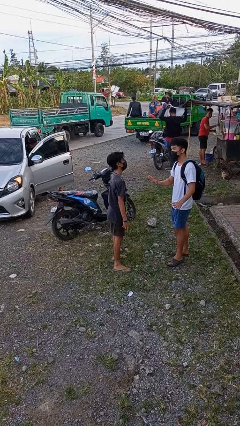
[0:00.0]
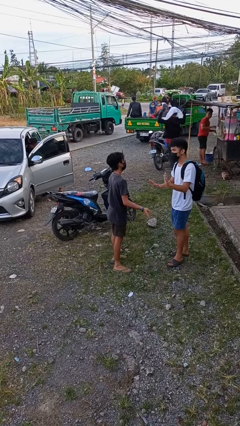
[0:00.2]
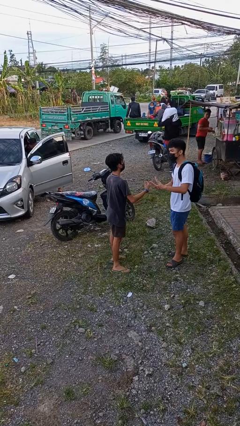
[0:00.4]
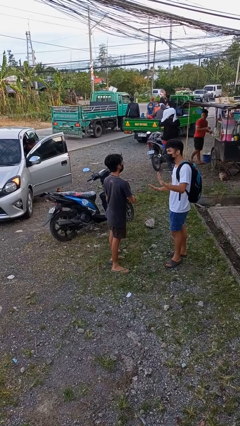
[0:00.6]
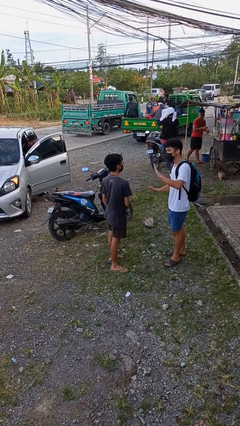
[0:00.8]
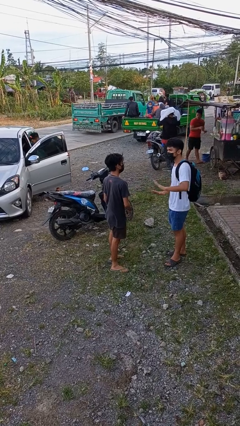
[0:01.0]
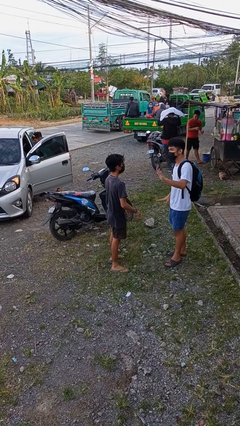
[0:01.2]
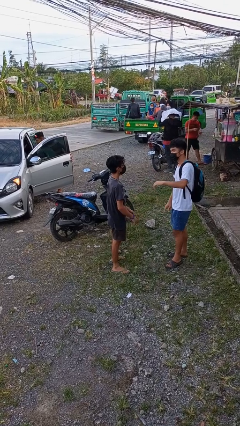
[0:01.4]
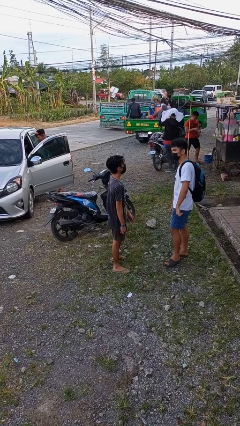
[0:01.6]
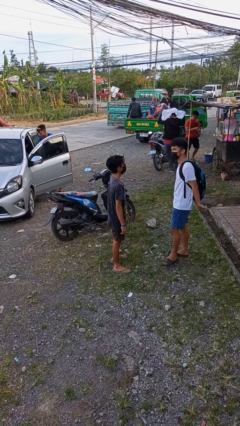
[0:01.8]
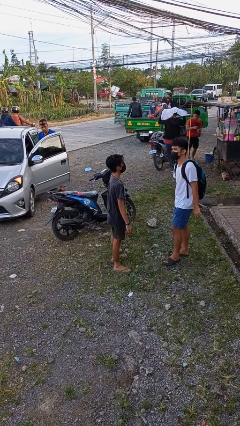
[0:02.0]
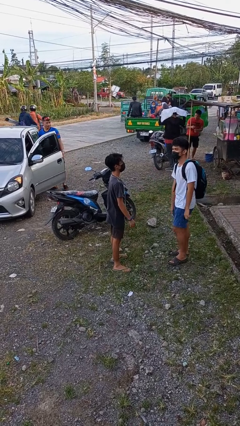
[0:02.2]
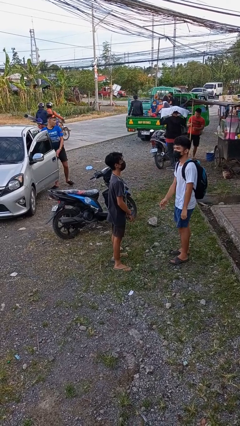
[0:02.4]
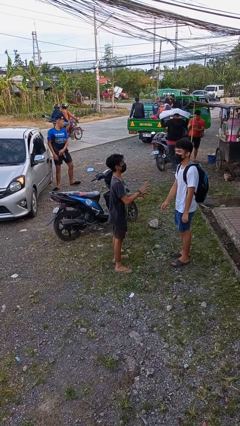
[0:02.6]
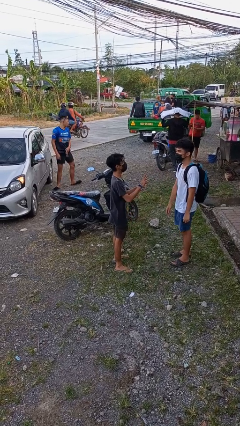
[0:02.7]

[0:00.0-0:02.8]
person talks to person

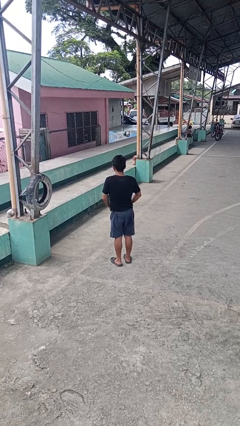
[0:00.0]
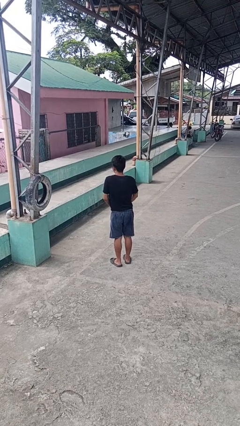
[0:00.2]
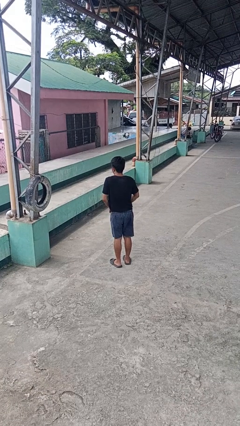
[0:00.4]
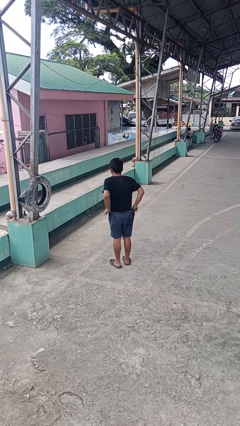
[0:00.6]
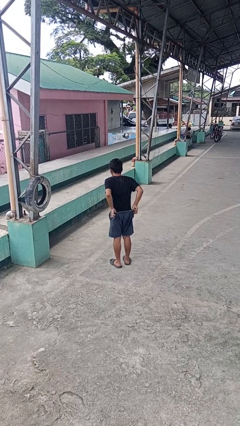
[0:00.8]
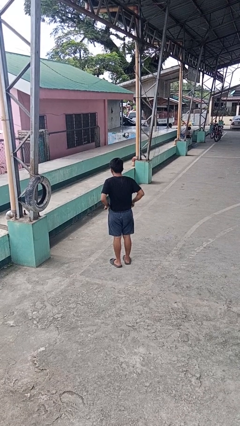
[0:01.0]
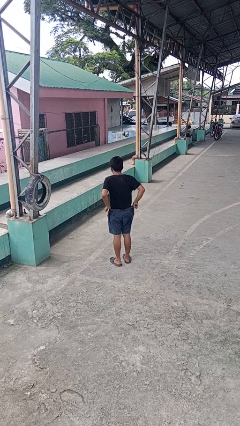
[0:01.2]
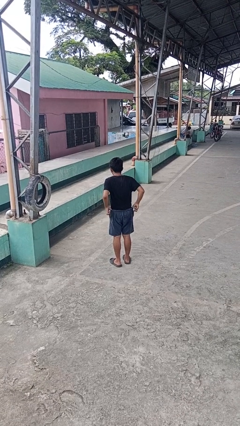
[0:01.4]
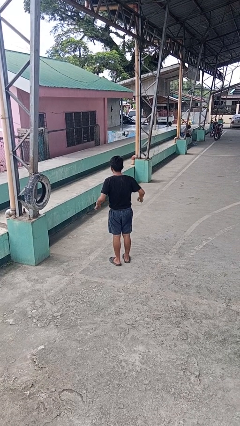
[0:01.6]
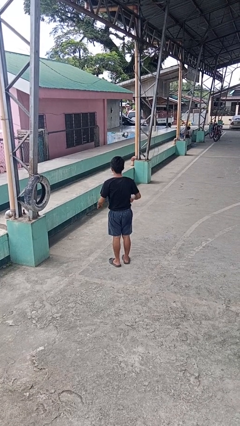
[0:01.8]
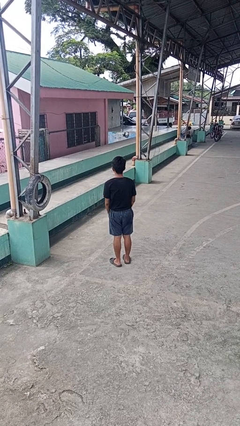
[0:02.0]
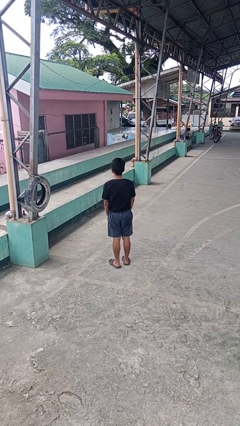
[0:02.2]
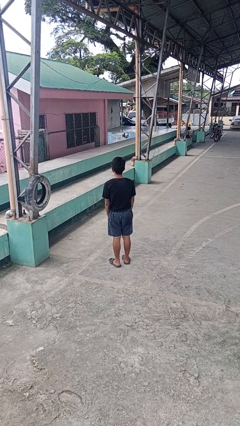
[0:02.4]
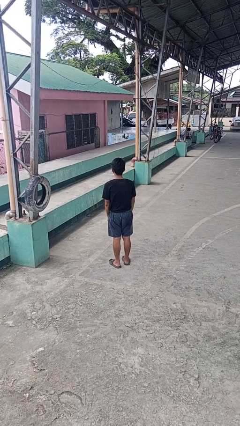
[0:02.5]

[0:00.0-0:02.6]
person hikes up pants

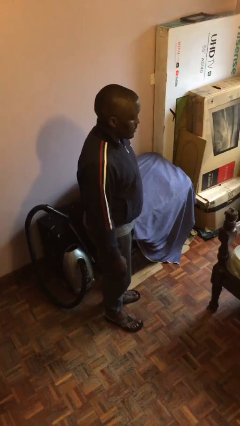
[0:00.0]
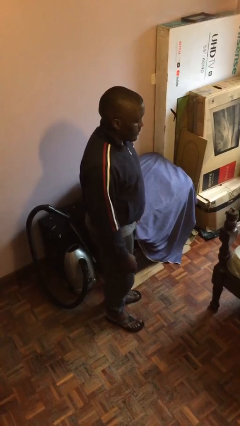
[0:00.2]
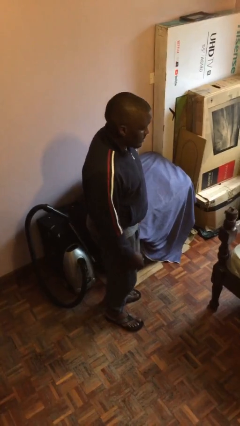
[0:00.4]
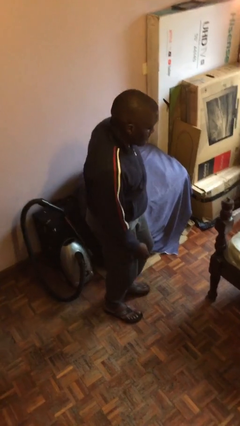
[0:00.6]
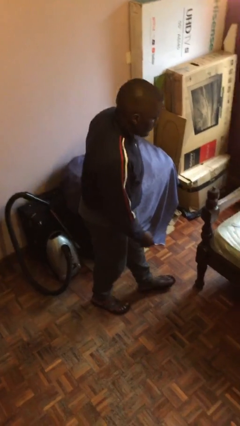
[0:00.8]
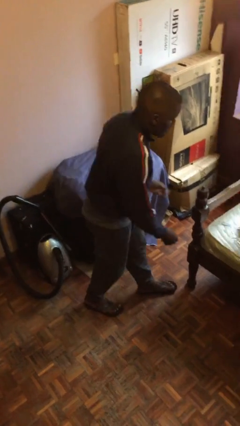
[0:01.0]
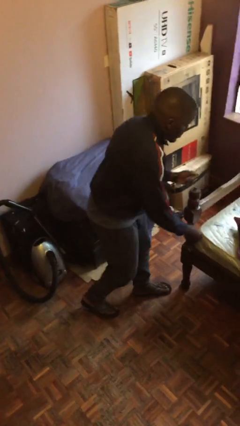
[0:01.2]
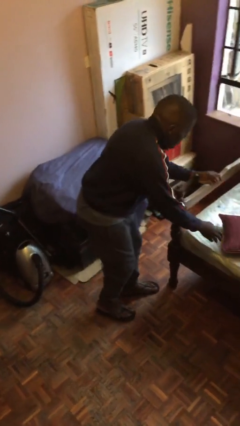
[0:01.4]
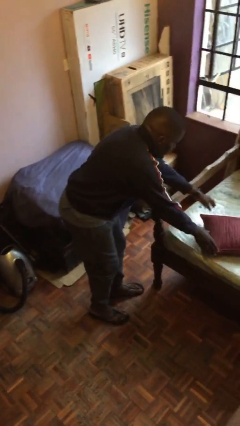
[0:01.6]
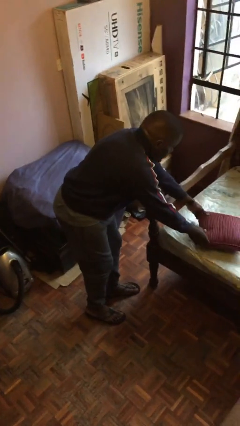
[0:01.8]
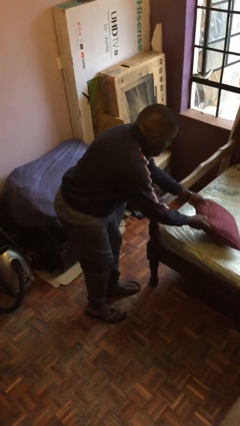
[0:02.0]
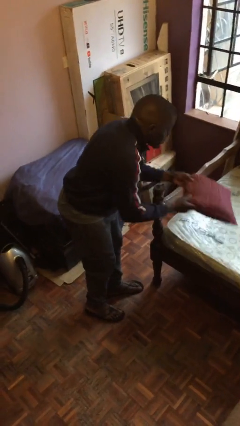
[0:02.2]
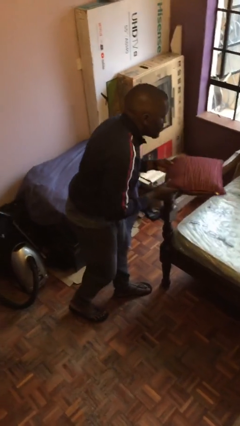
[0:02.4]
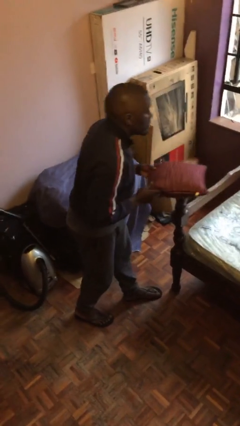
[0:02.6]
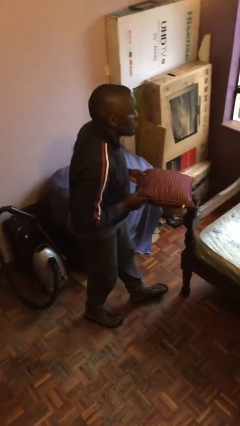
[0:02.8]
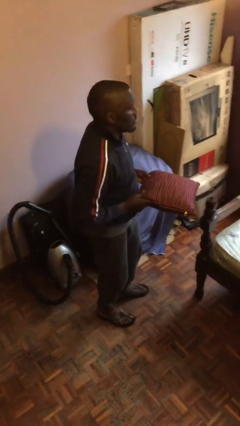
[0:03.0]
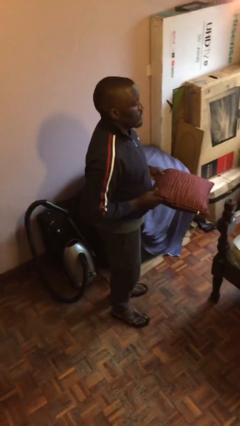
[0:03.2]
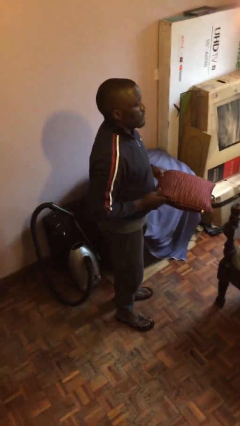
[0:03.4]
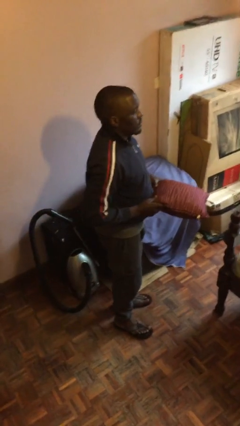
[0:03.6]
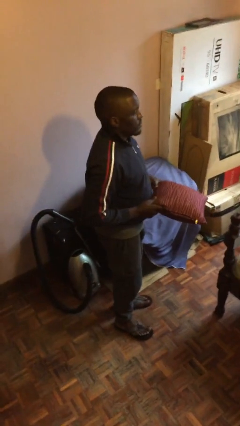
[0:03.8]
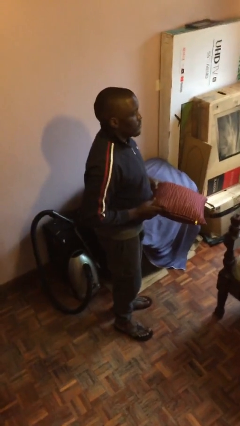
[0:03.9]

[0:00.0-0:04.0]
person picks up object from bed

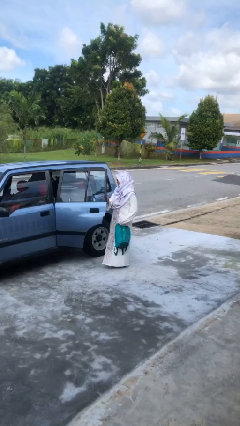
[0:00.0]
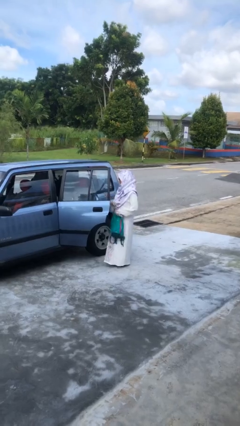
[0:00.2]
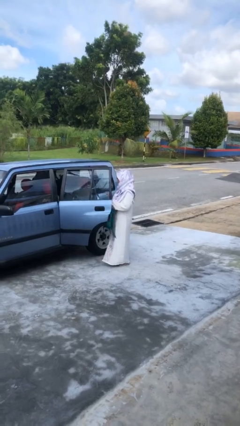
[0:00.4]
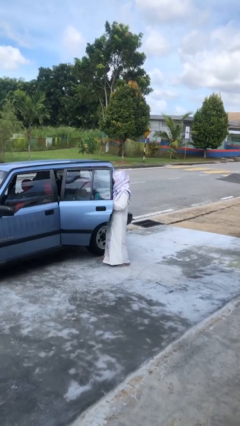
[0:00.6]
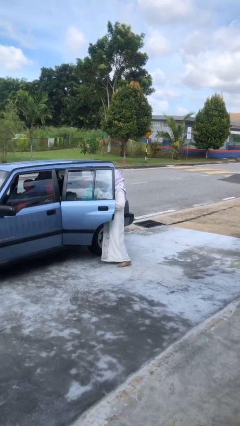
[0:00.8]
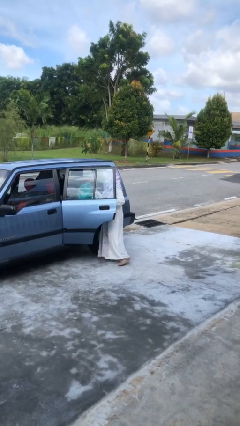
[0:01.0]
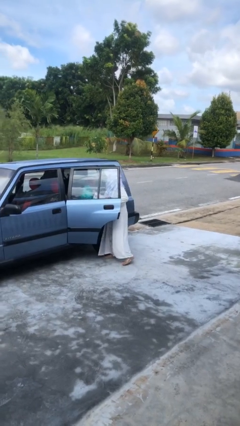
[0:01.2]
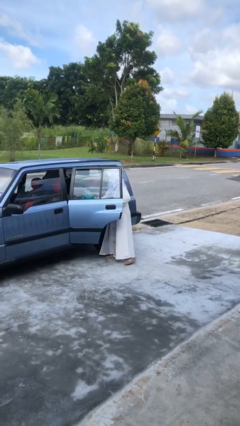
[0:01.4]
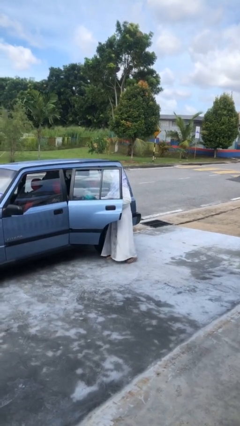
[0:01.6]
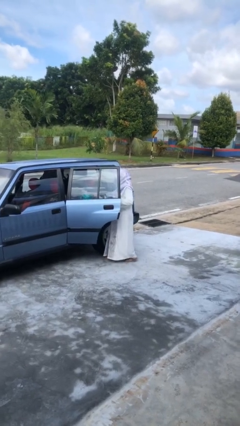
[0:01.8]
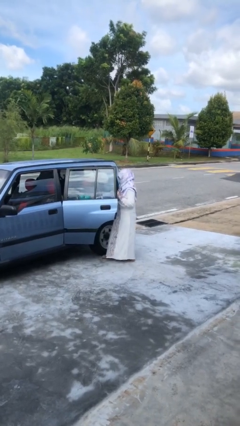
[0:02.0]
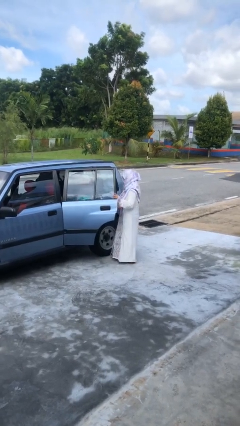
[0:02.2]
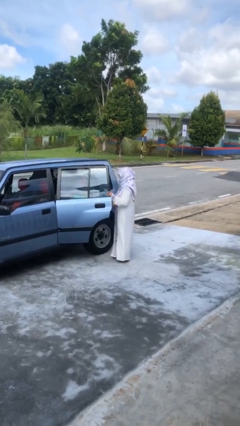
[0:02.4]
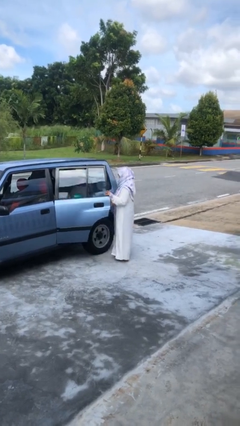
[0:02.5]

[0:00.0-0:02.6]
person loads car

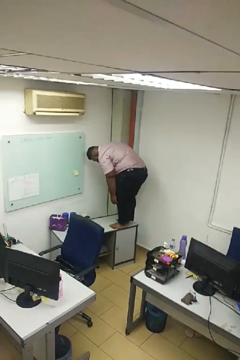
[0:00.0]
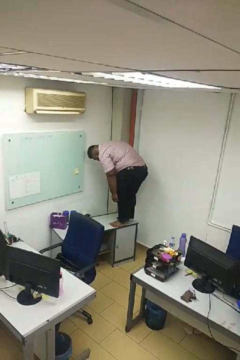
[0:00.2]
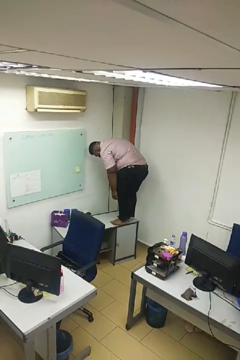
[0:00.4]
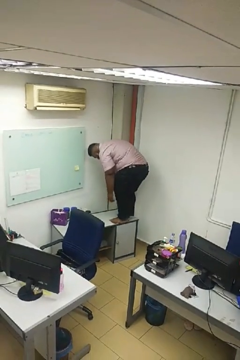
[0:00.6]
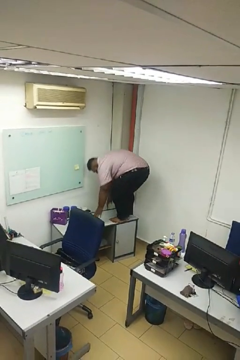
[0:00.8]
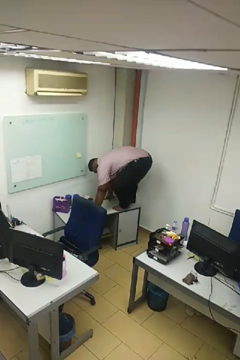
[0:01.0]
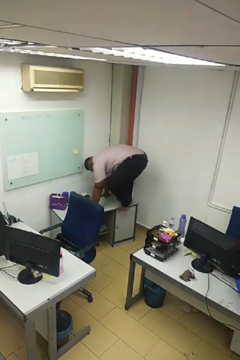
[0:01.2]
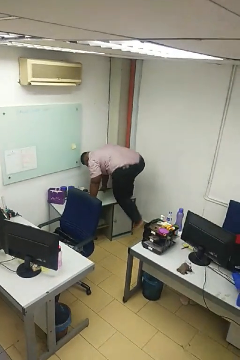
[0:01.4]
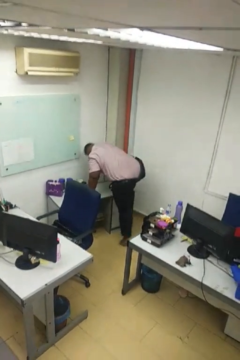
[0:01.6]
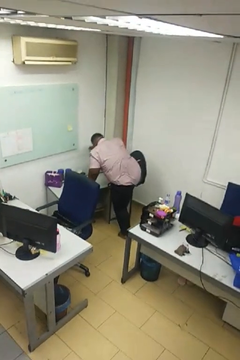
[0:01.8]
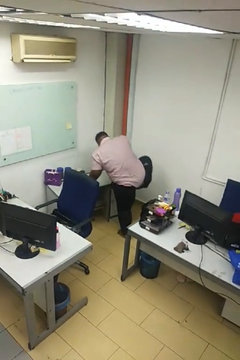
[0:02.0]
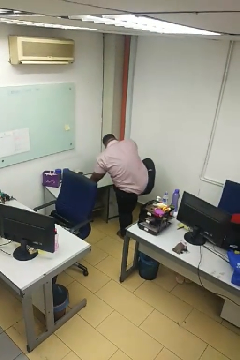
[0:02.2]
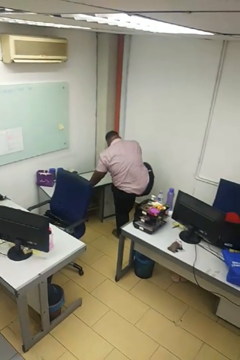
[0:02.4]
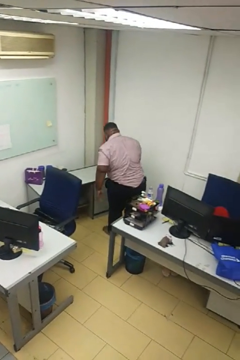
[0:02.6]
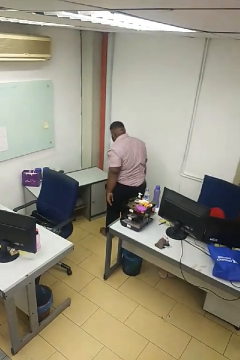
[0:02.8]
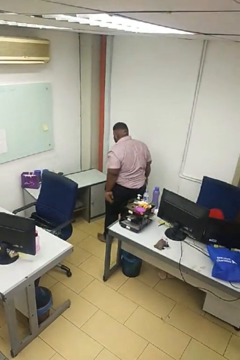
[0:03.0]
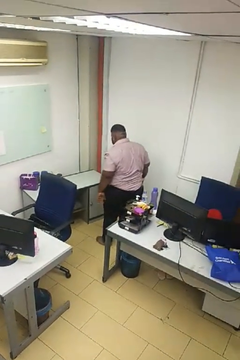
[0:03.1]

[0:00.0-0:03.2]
person climbs off table

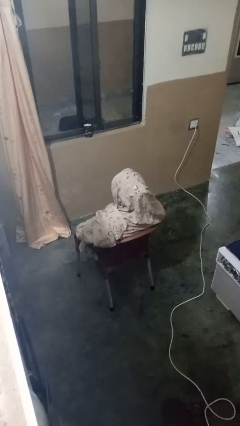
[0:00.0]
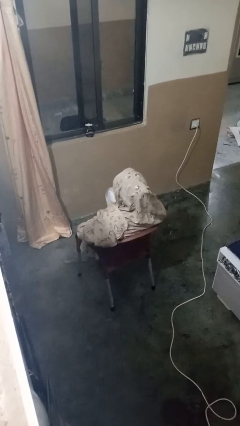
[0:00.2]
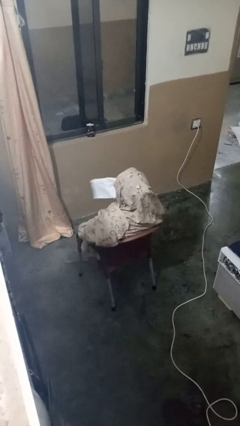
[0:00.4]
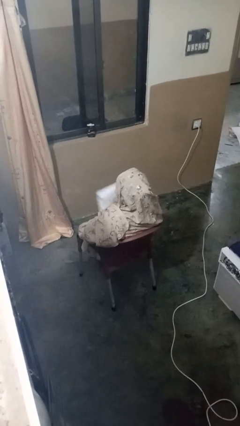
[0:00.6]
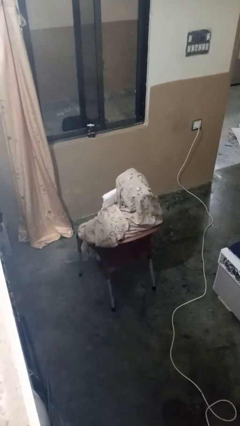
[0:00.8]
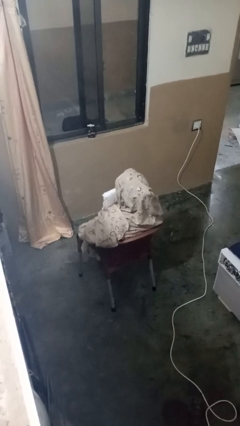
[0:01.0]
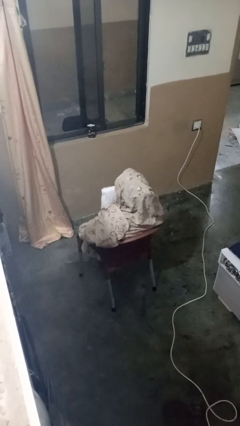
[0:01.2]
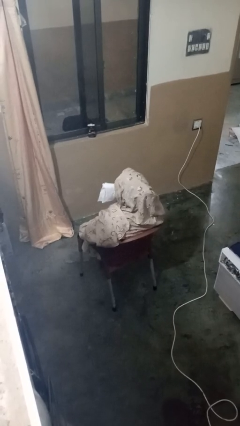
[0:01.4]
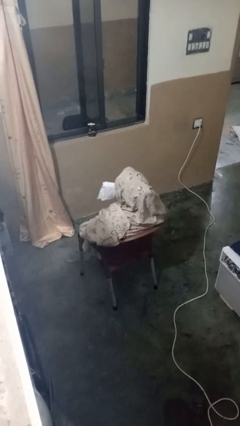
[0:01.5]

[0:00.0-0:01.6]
person wipes mouth with napkin

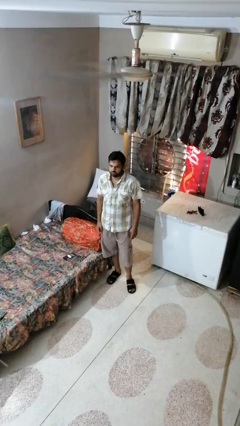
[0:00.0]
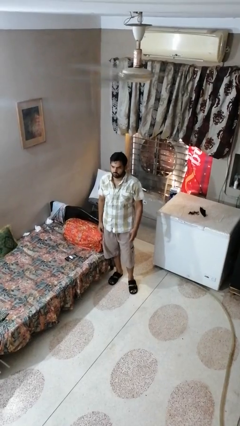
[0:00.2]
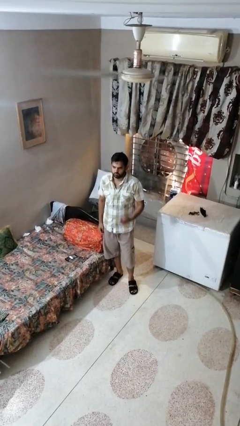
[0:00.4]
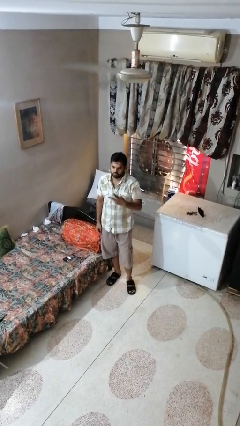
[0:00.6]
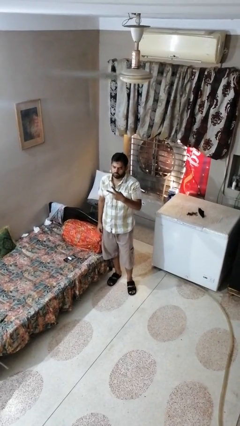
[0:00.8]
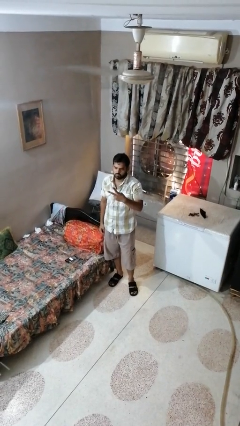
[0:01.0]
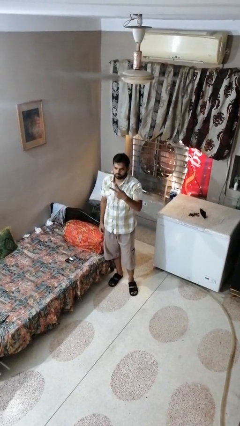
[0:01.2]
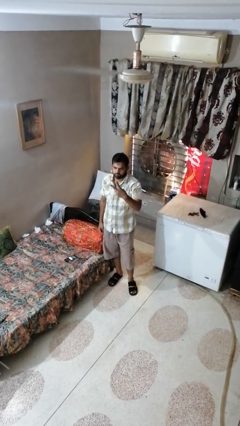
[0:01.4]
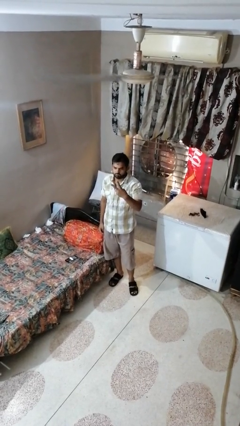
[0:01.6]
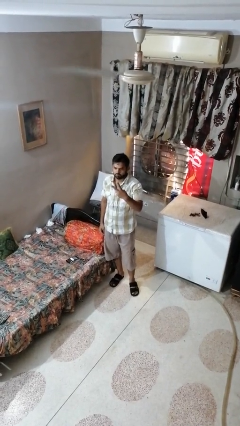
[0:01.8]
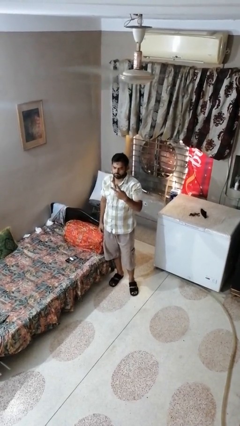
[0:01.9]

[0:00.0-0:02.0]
person gestures peace
